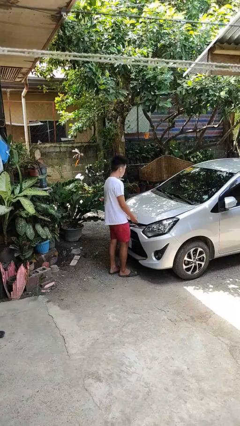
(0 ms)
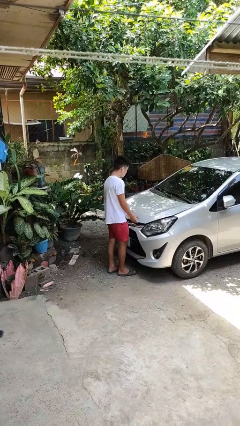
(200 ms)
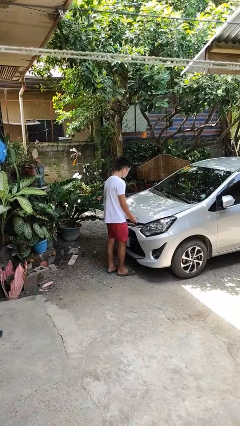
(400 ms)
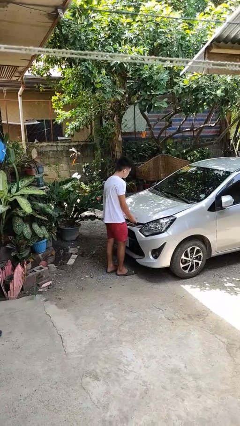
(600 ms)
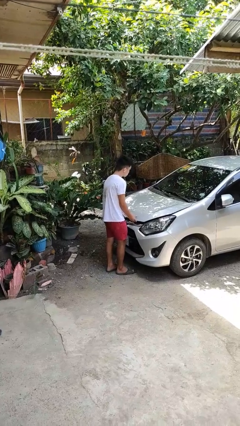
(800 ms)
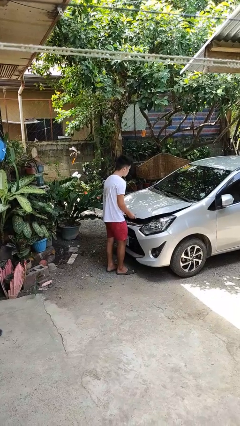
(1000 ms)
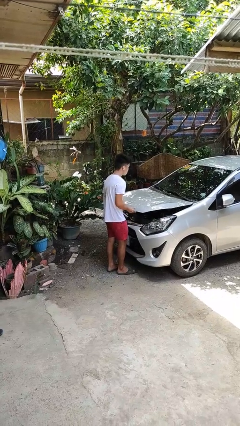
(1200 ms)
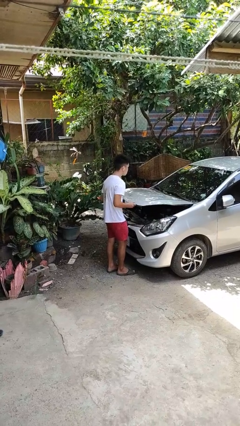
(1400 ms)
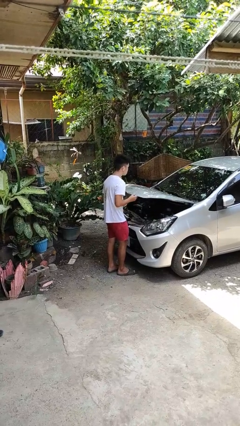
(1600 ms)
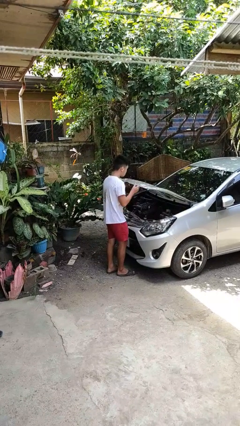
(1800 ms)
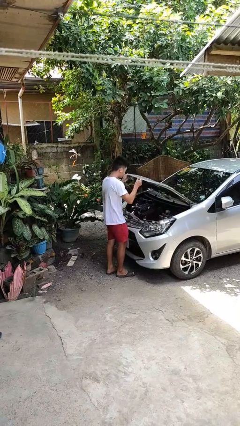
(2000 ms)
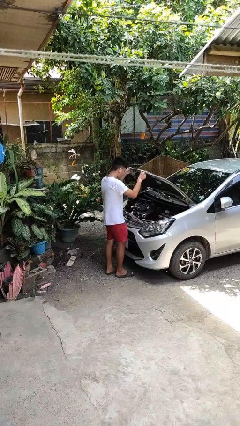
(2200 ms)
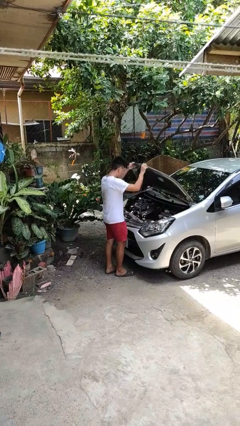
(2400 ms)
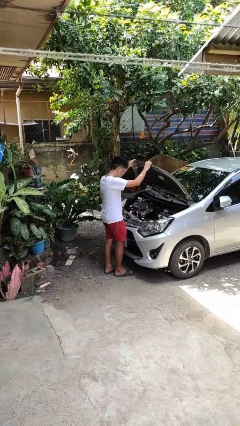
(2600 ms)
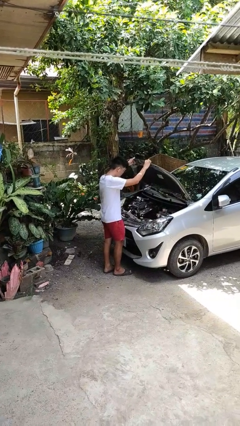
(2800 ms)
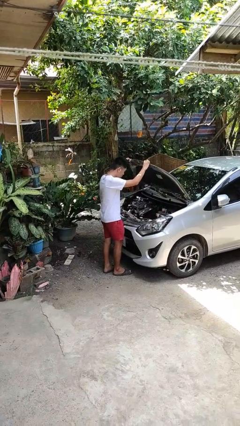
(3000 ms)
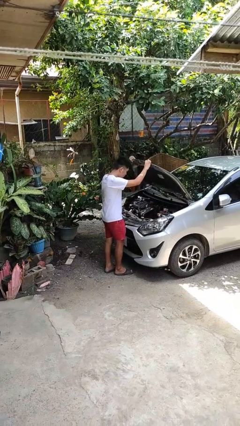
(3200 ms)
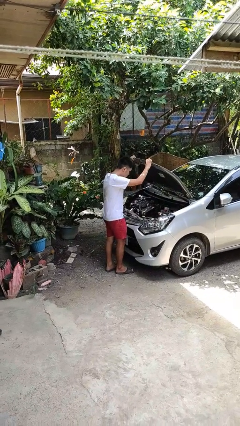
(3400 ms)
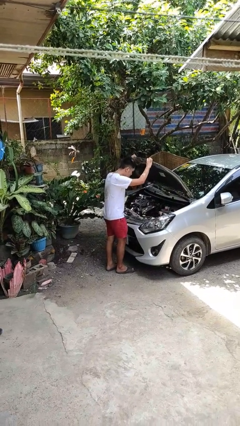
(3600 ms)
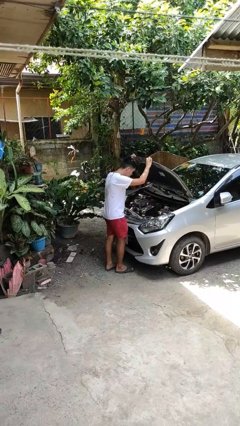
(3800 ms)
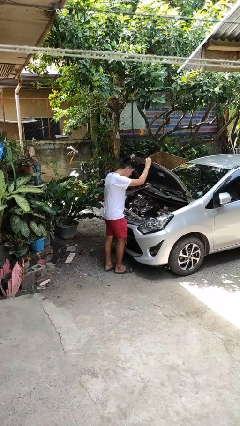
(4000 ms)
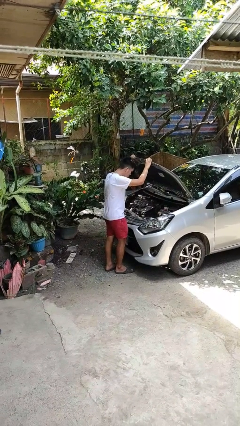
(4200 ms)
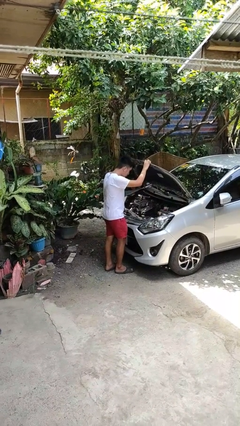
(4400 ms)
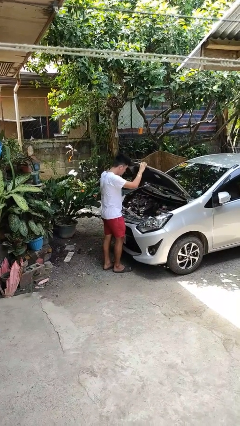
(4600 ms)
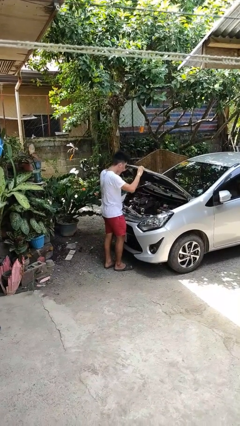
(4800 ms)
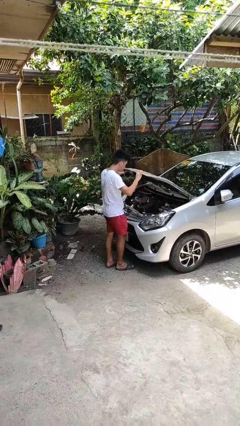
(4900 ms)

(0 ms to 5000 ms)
person opens car hood

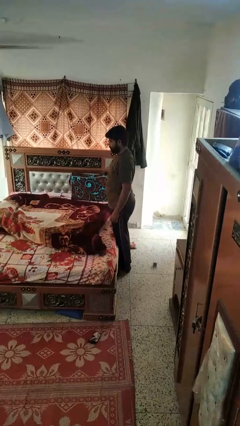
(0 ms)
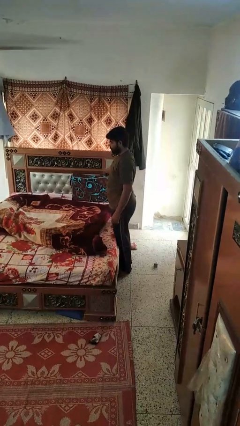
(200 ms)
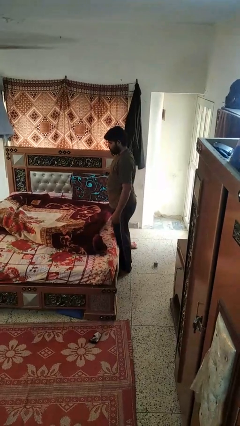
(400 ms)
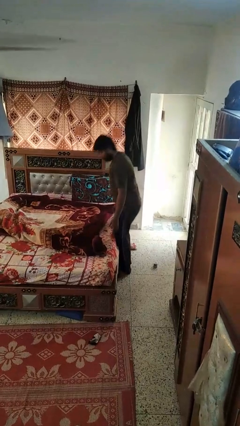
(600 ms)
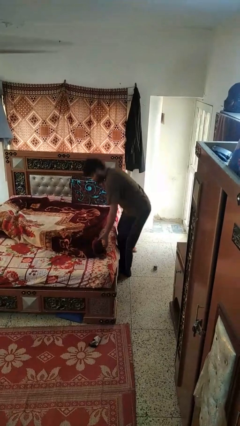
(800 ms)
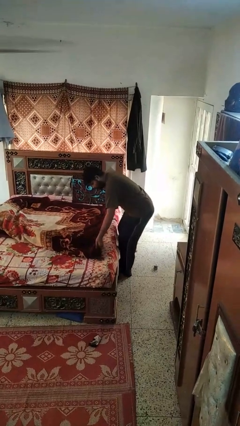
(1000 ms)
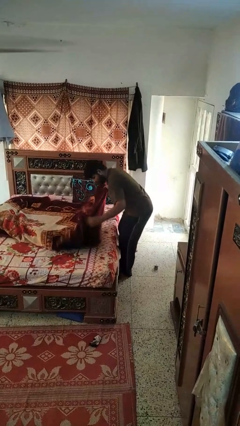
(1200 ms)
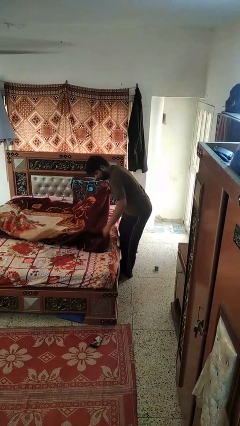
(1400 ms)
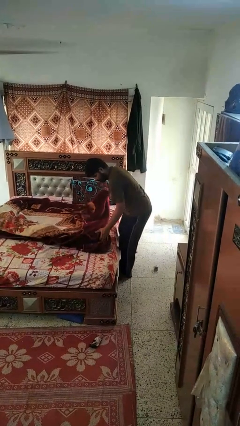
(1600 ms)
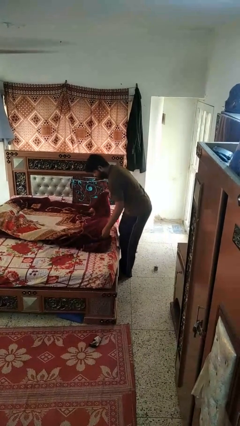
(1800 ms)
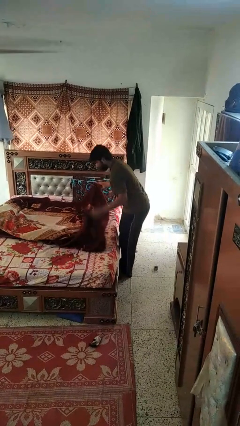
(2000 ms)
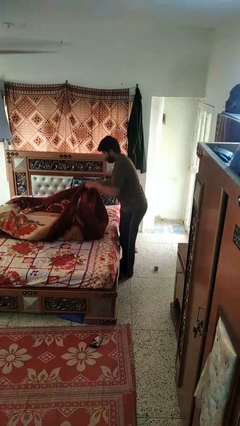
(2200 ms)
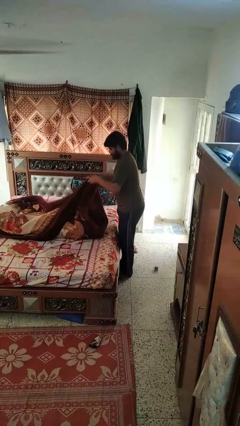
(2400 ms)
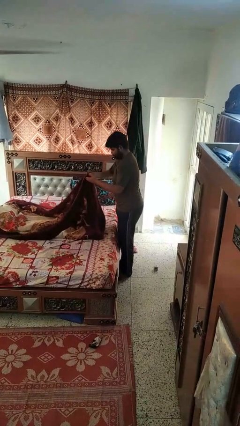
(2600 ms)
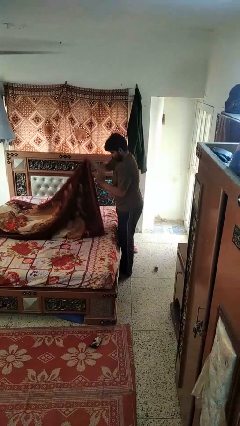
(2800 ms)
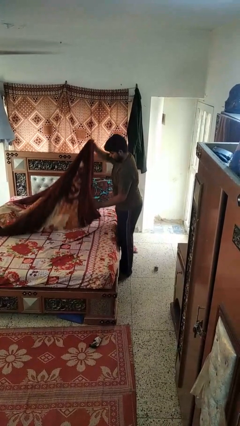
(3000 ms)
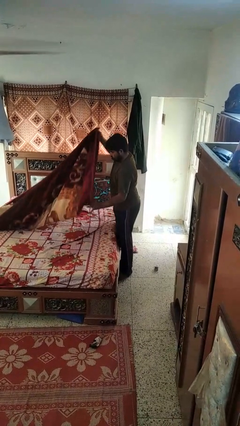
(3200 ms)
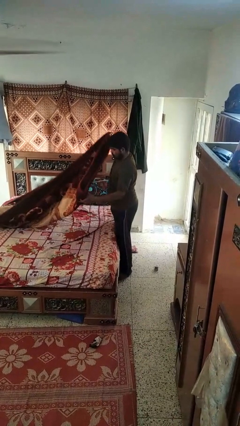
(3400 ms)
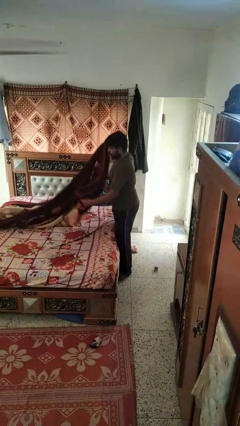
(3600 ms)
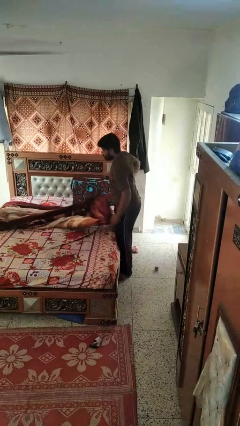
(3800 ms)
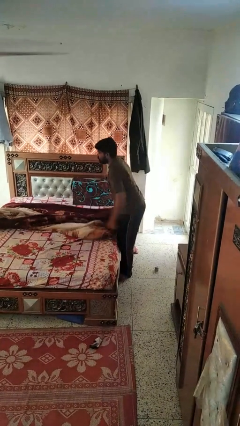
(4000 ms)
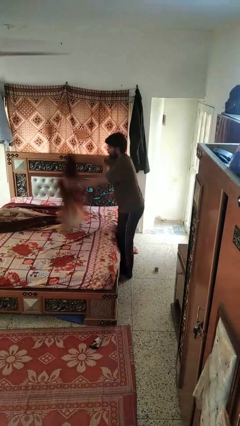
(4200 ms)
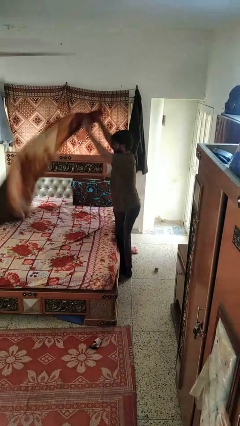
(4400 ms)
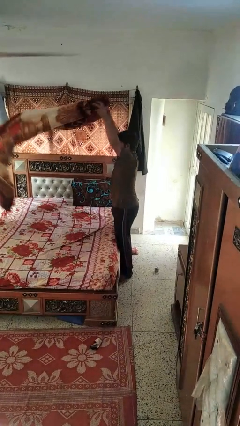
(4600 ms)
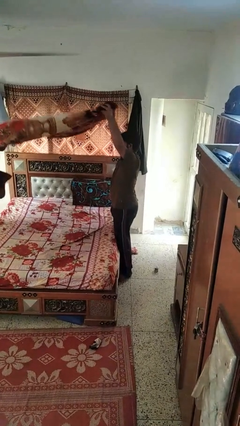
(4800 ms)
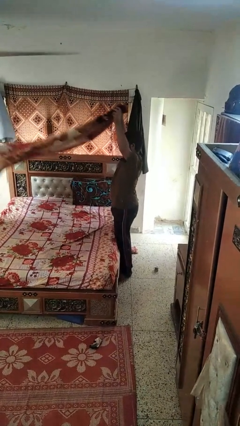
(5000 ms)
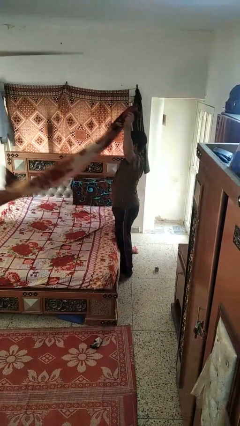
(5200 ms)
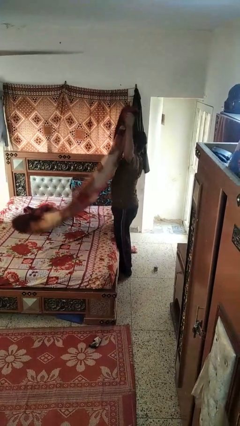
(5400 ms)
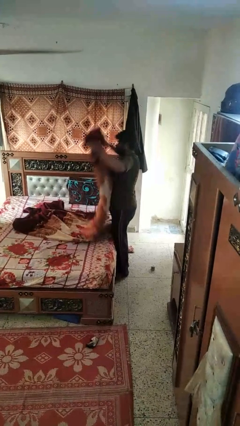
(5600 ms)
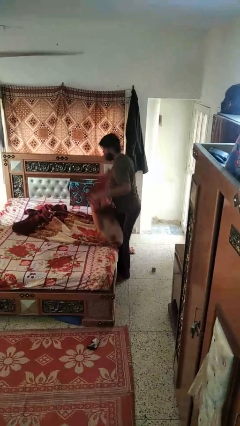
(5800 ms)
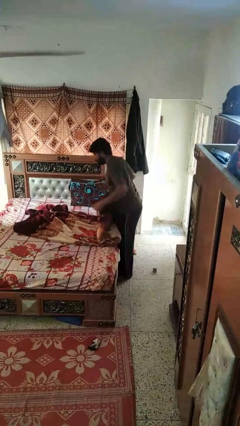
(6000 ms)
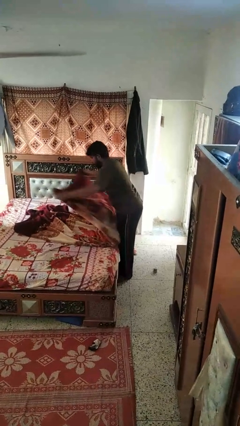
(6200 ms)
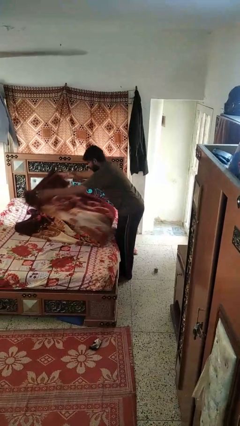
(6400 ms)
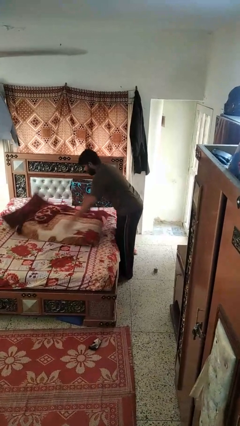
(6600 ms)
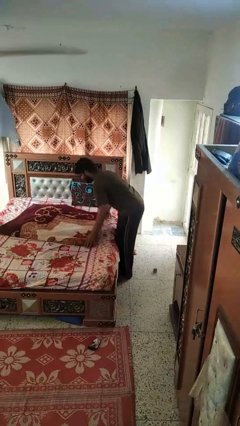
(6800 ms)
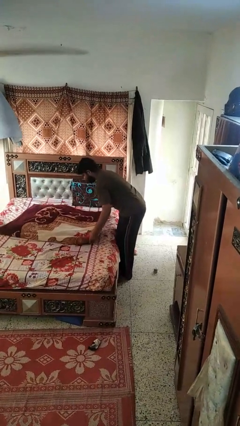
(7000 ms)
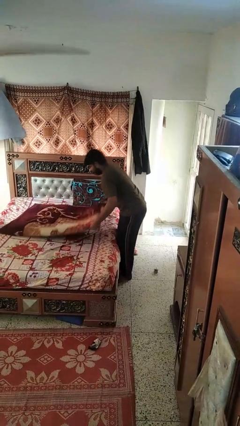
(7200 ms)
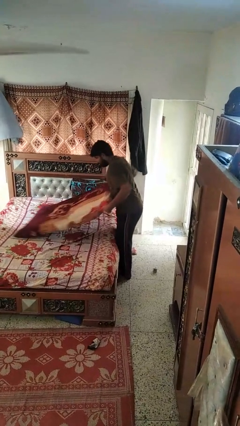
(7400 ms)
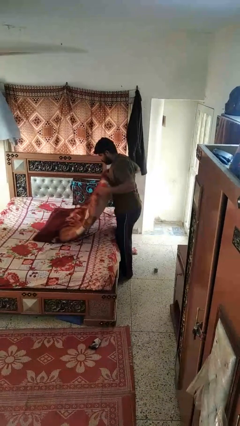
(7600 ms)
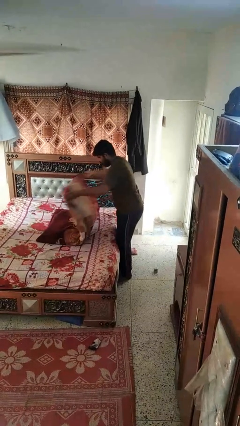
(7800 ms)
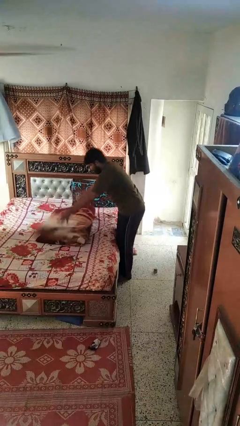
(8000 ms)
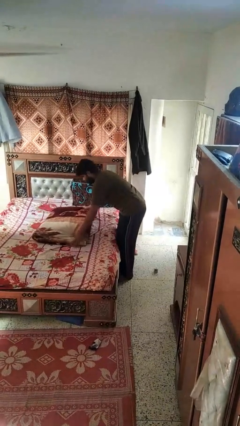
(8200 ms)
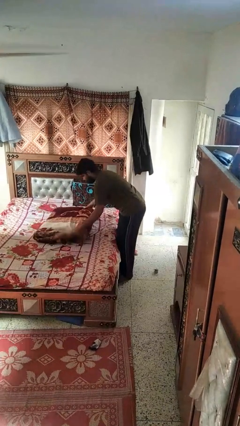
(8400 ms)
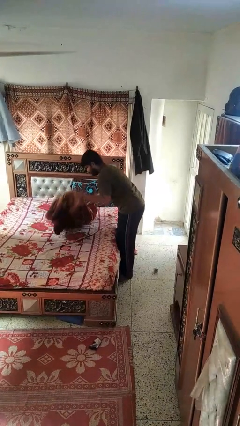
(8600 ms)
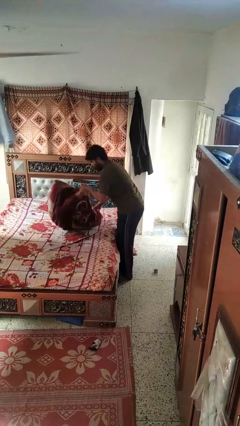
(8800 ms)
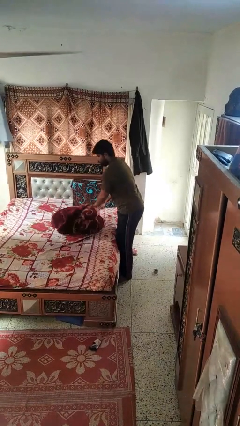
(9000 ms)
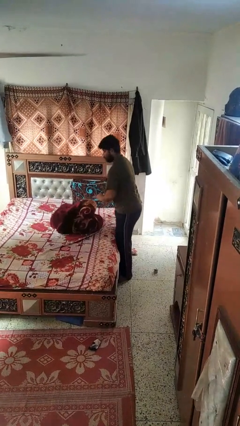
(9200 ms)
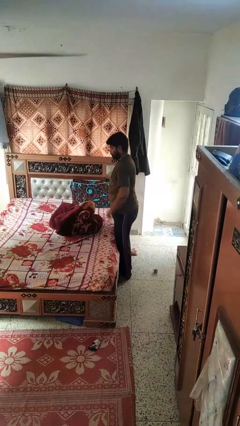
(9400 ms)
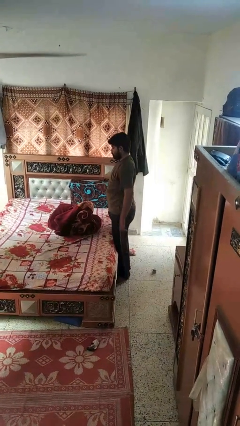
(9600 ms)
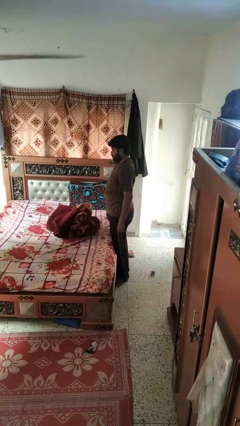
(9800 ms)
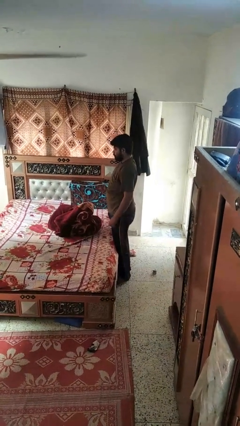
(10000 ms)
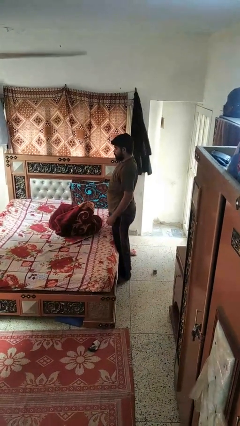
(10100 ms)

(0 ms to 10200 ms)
person folds blanket

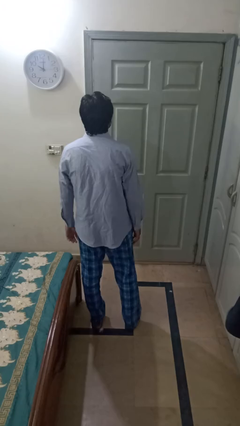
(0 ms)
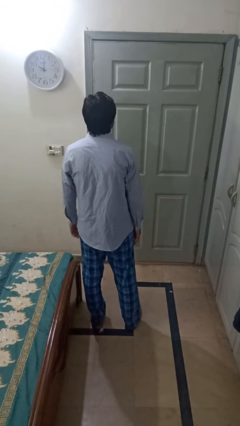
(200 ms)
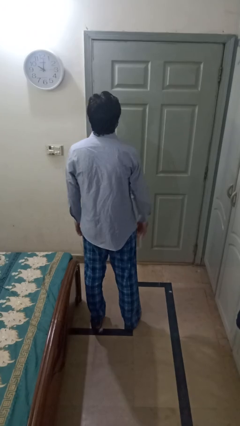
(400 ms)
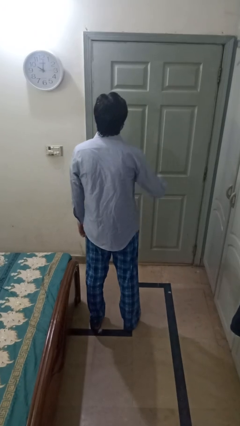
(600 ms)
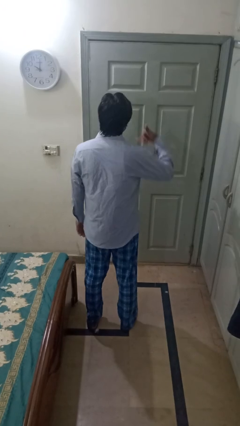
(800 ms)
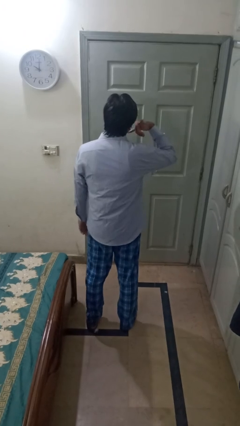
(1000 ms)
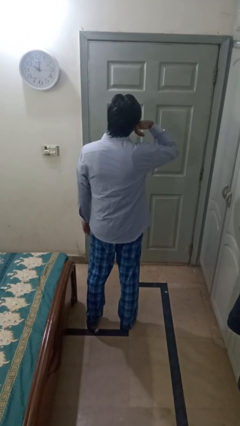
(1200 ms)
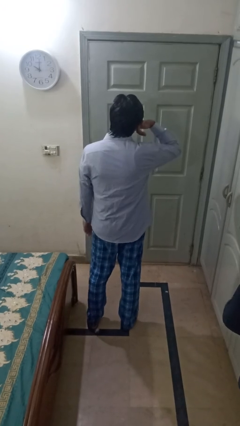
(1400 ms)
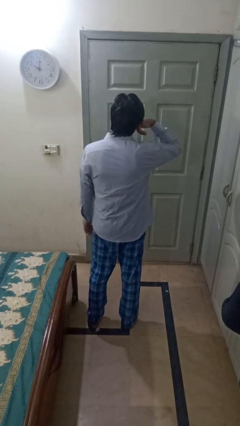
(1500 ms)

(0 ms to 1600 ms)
person gestures call me

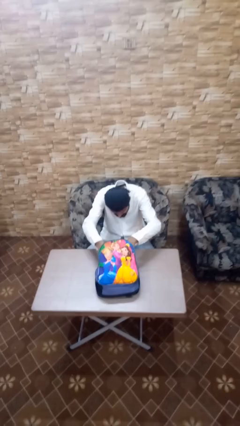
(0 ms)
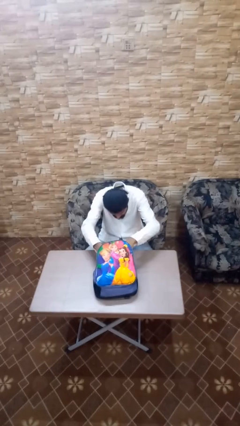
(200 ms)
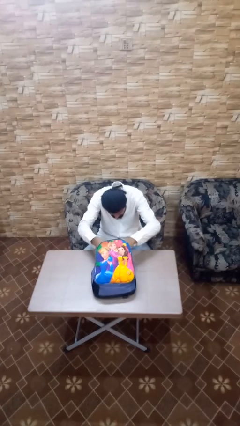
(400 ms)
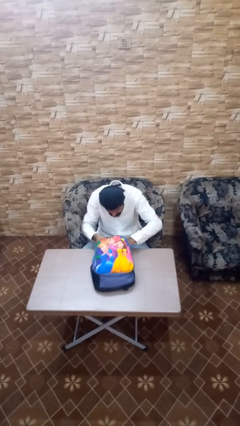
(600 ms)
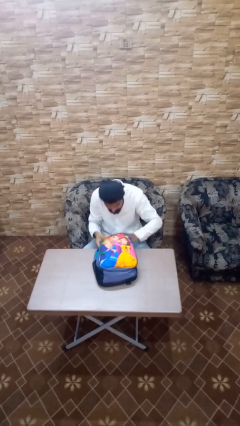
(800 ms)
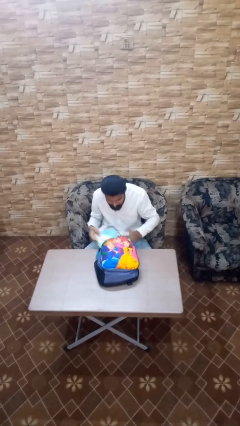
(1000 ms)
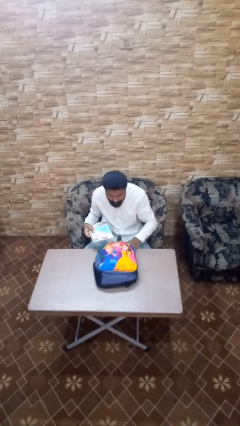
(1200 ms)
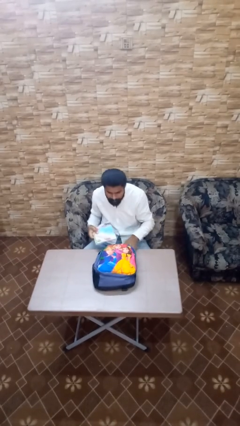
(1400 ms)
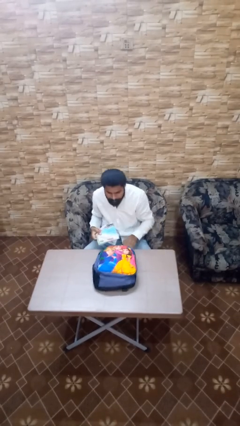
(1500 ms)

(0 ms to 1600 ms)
person takes object from backpack
